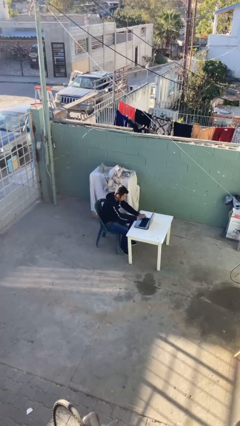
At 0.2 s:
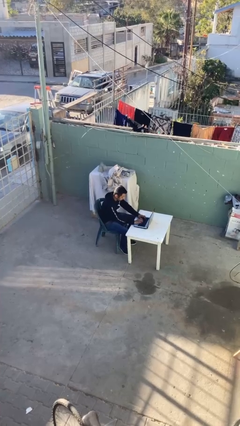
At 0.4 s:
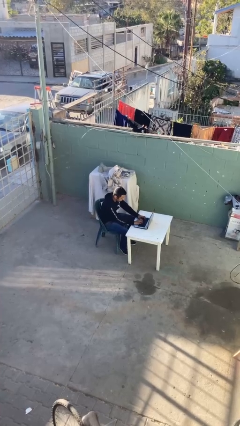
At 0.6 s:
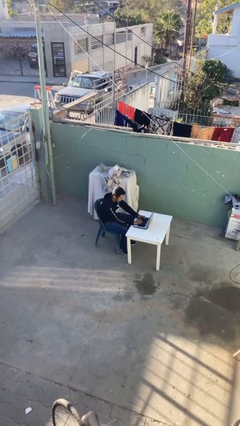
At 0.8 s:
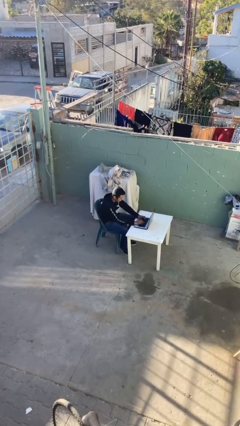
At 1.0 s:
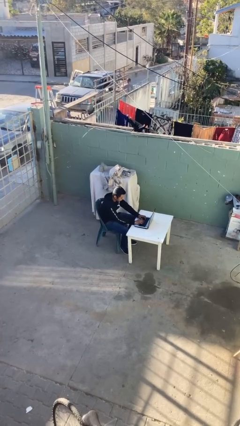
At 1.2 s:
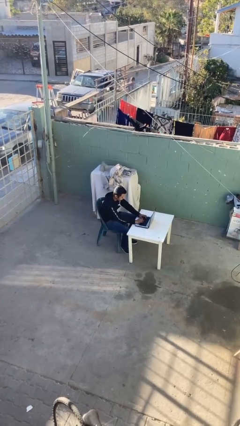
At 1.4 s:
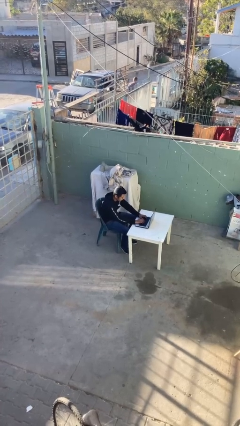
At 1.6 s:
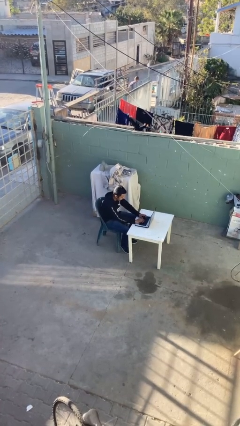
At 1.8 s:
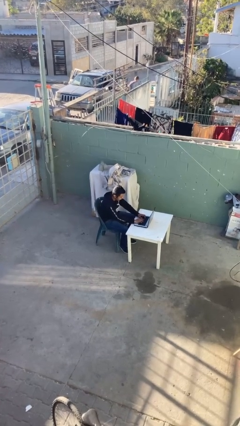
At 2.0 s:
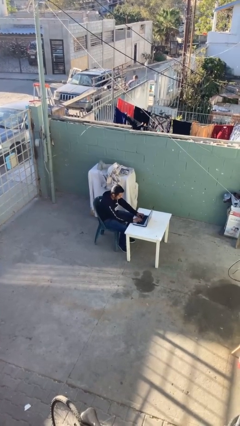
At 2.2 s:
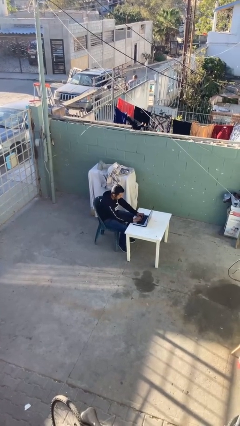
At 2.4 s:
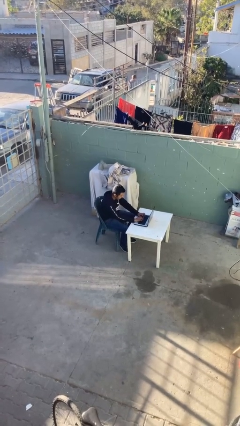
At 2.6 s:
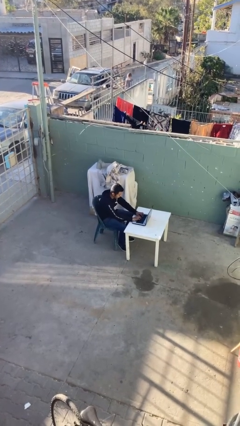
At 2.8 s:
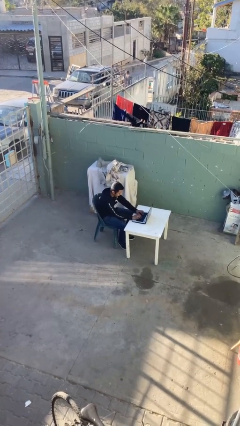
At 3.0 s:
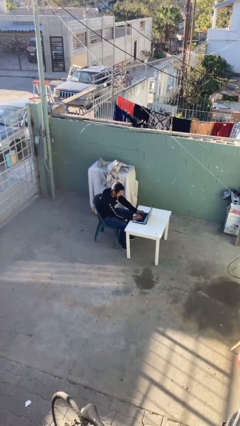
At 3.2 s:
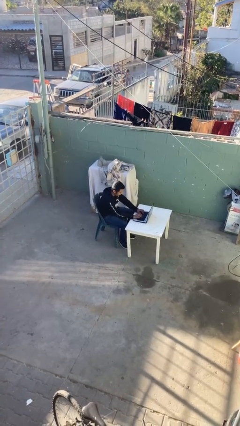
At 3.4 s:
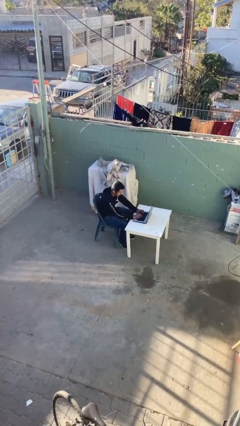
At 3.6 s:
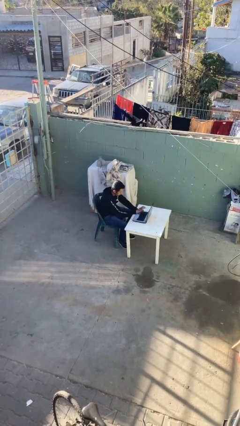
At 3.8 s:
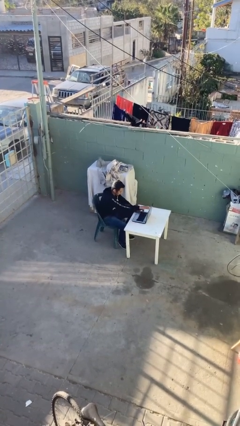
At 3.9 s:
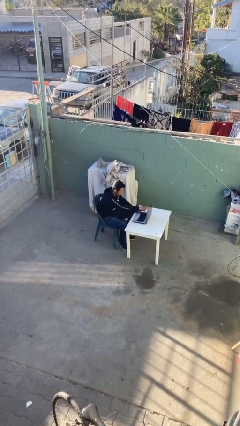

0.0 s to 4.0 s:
person interacts with laptop

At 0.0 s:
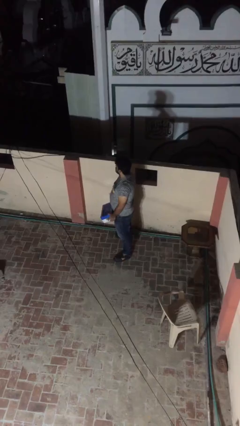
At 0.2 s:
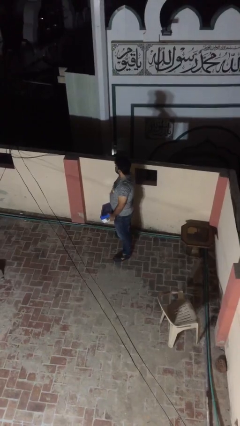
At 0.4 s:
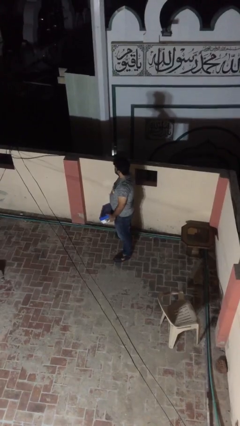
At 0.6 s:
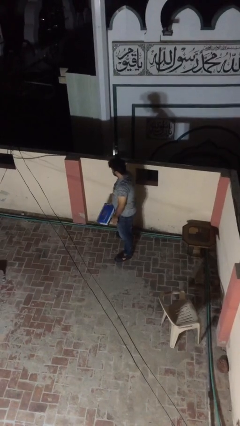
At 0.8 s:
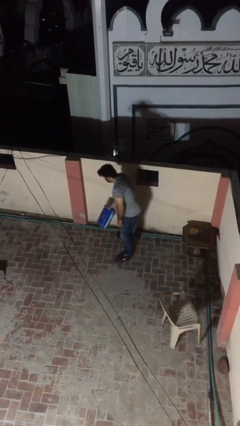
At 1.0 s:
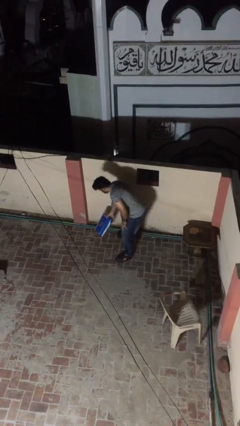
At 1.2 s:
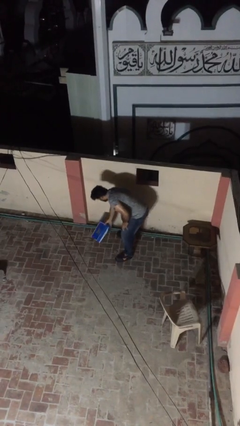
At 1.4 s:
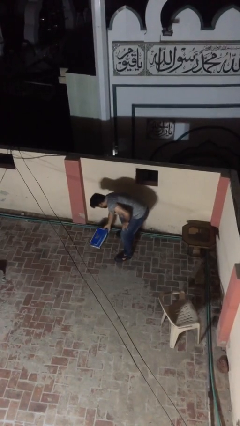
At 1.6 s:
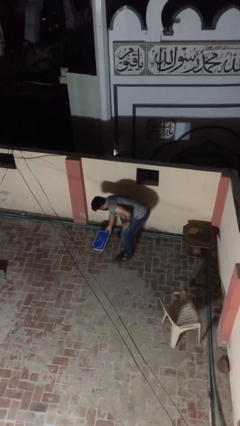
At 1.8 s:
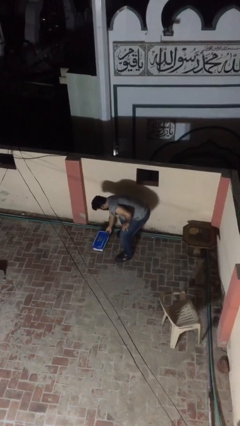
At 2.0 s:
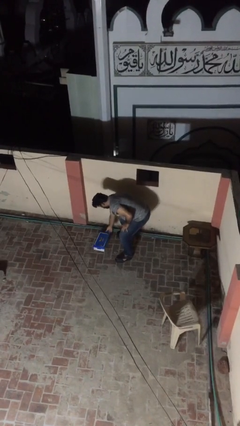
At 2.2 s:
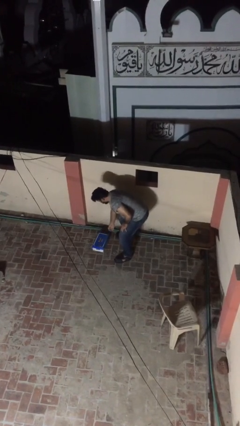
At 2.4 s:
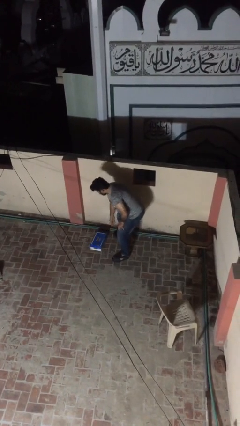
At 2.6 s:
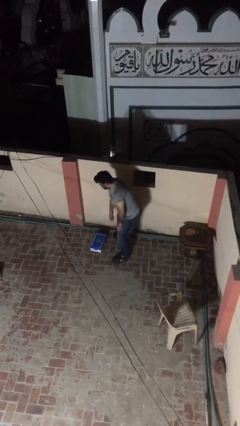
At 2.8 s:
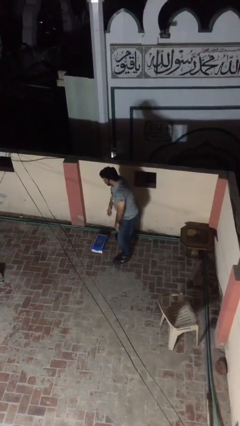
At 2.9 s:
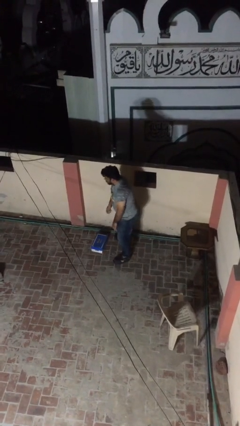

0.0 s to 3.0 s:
person puts down object on floor

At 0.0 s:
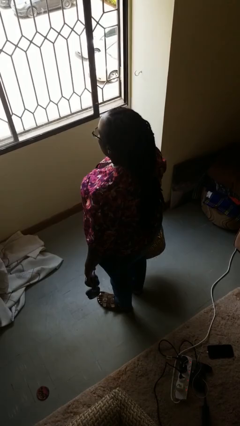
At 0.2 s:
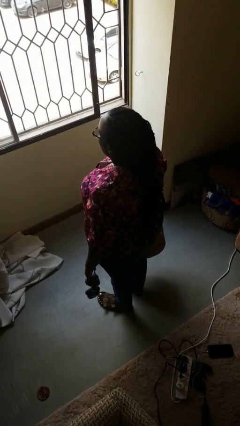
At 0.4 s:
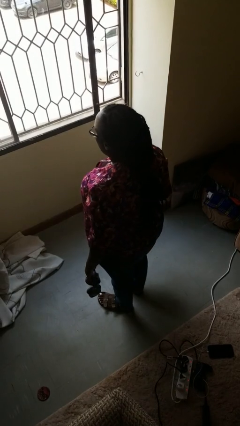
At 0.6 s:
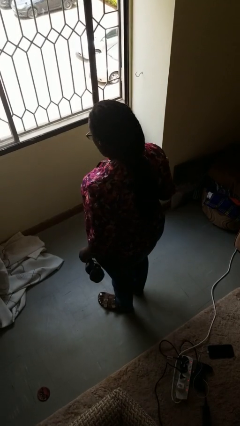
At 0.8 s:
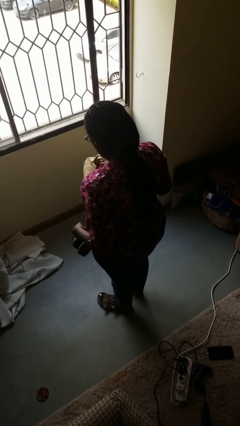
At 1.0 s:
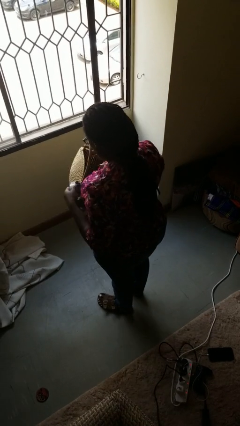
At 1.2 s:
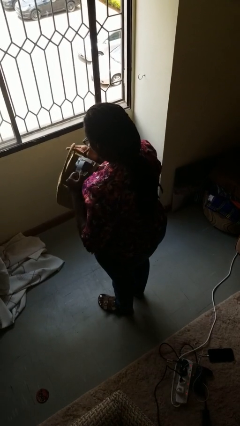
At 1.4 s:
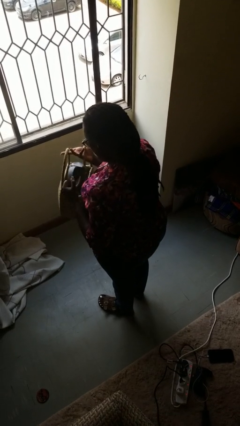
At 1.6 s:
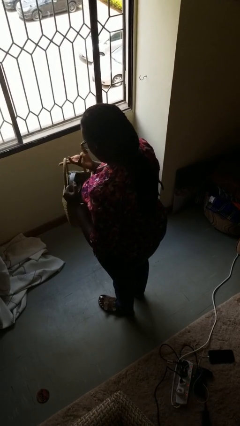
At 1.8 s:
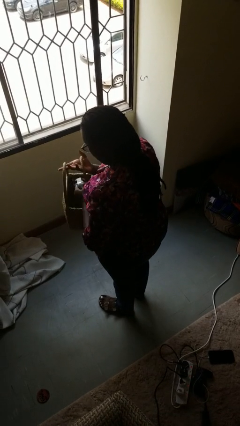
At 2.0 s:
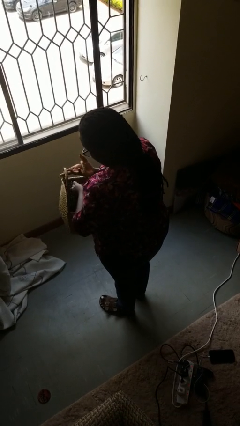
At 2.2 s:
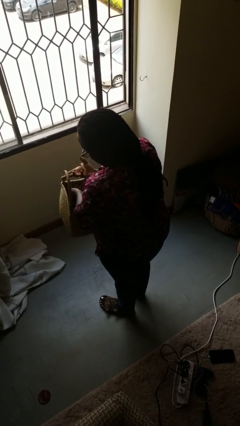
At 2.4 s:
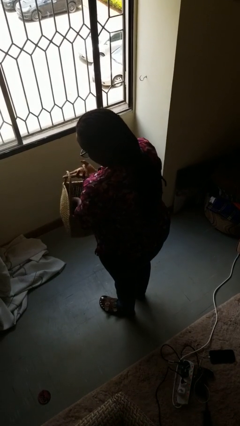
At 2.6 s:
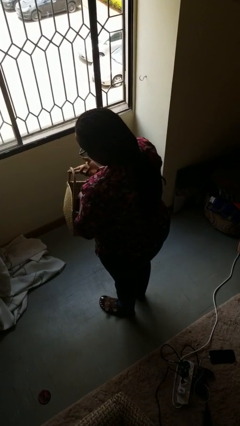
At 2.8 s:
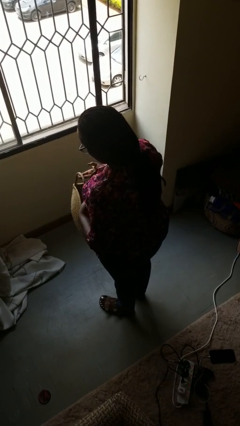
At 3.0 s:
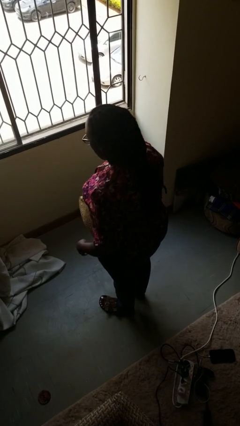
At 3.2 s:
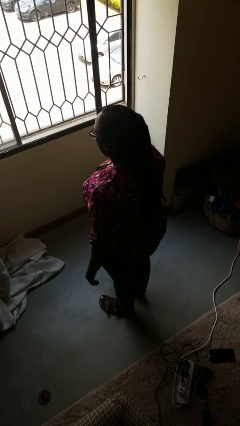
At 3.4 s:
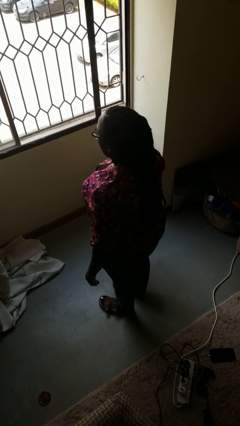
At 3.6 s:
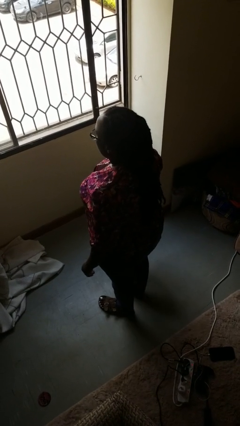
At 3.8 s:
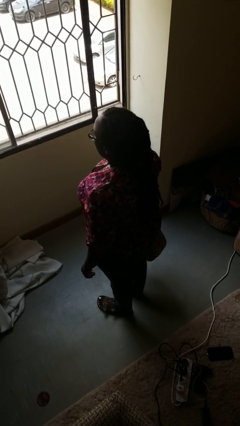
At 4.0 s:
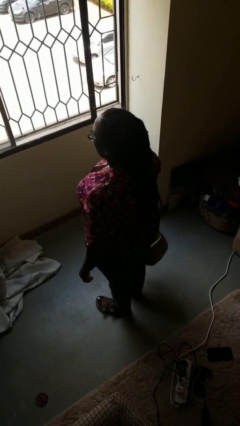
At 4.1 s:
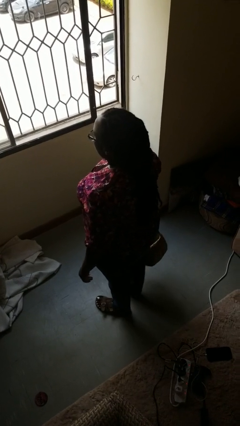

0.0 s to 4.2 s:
person puts object into basket

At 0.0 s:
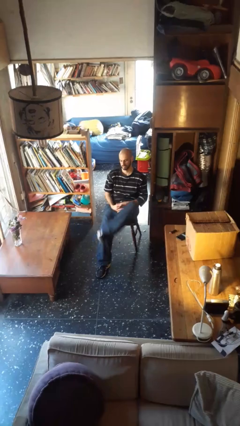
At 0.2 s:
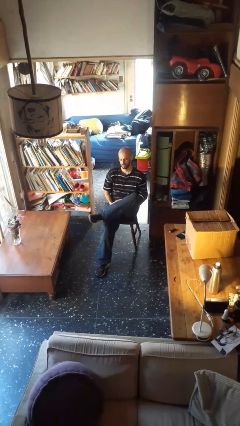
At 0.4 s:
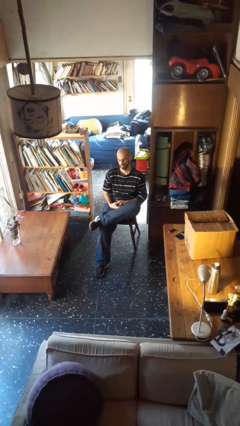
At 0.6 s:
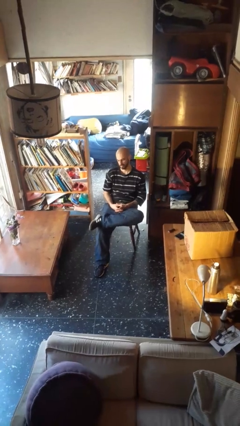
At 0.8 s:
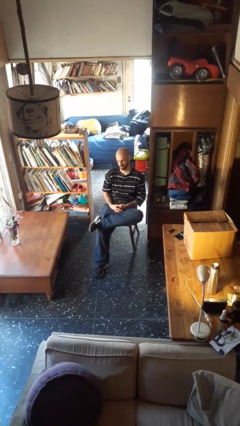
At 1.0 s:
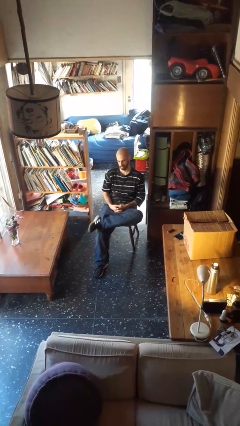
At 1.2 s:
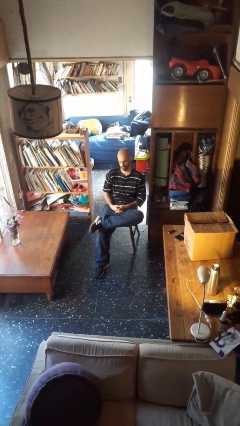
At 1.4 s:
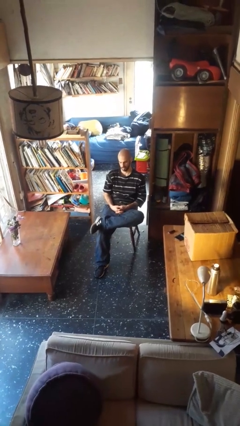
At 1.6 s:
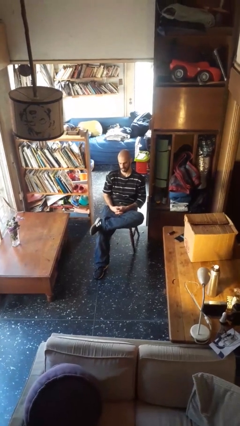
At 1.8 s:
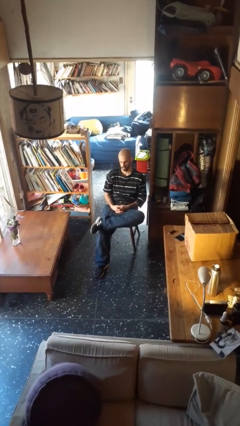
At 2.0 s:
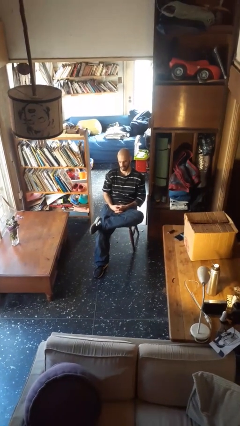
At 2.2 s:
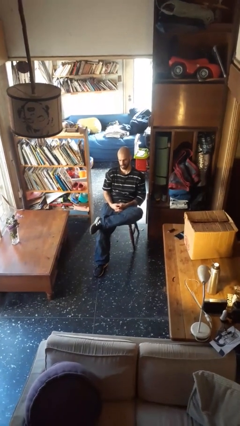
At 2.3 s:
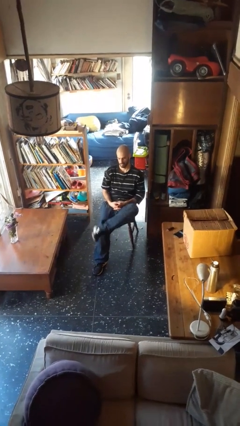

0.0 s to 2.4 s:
person crosses legs

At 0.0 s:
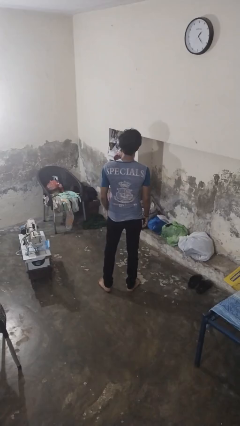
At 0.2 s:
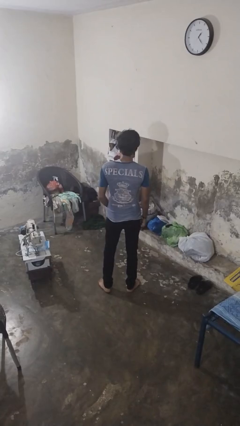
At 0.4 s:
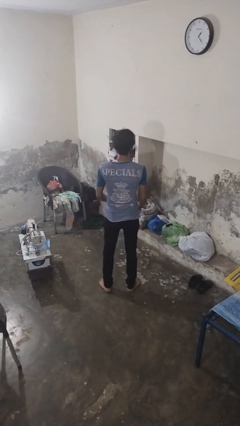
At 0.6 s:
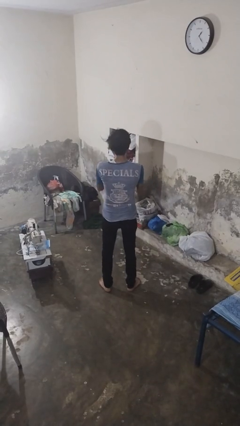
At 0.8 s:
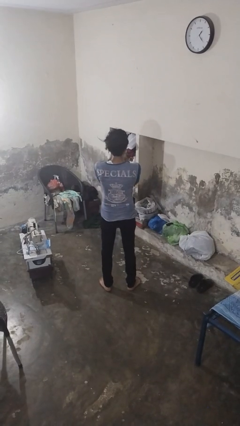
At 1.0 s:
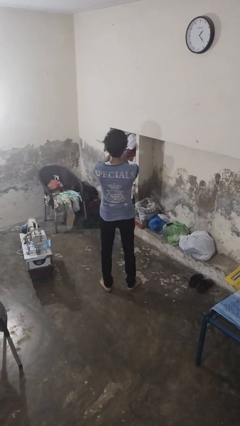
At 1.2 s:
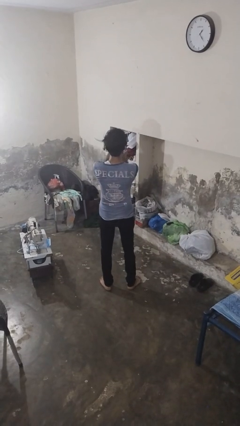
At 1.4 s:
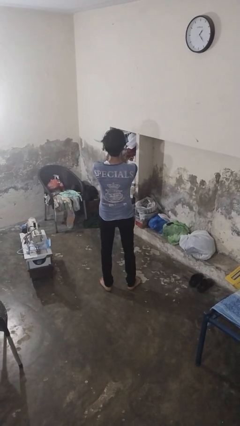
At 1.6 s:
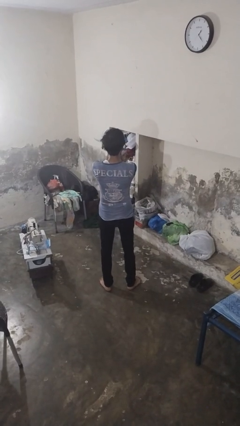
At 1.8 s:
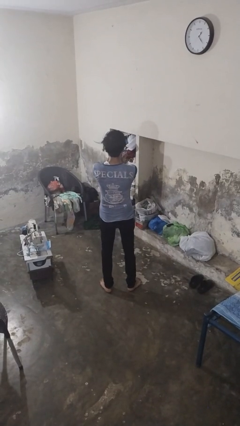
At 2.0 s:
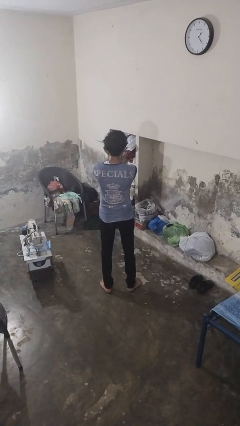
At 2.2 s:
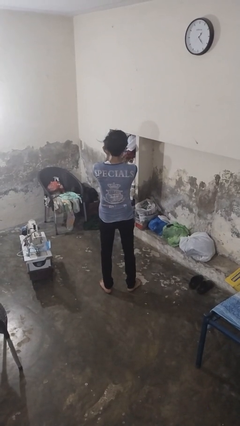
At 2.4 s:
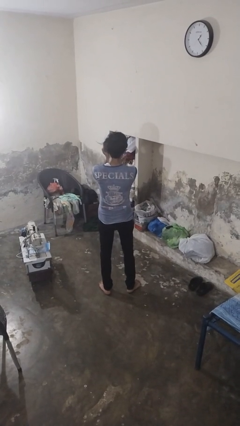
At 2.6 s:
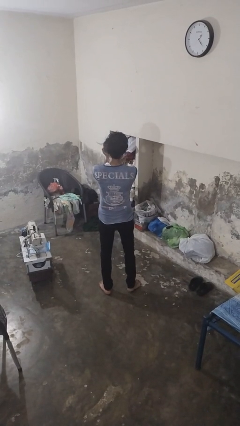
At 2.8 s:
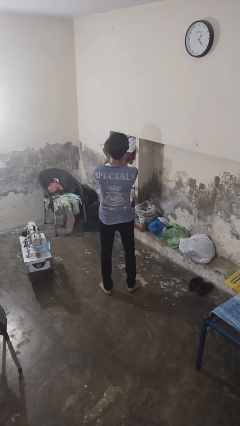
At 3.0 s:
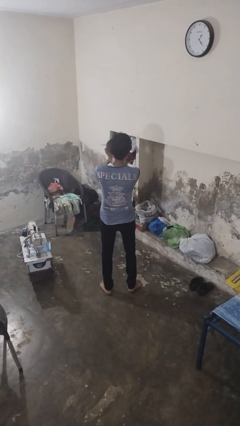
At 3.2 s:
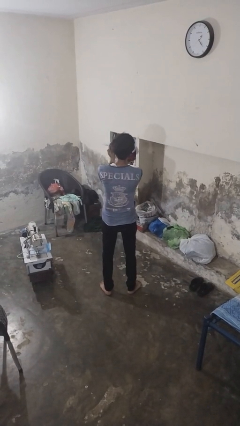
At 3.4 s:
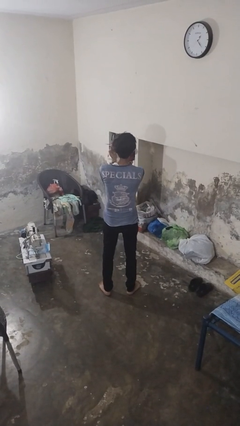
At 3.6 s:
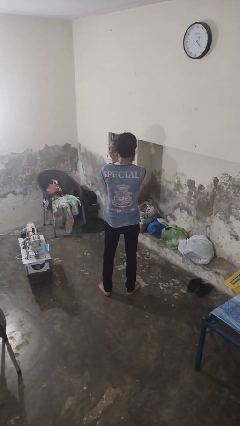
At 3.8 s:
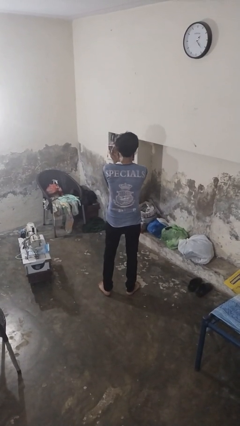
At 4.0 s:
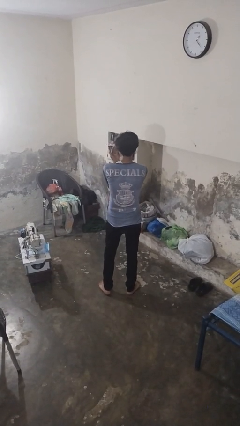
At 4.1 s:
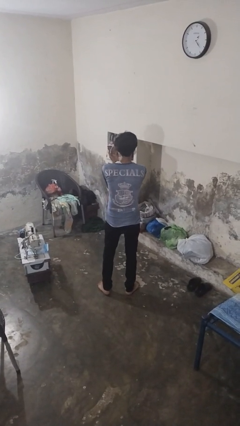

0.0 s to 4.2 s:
person prays
